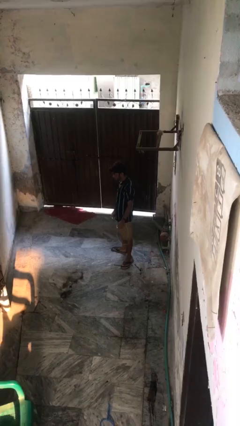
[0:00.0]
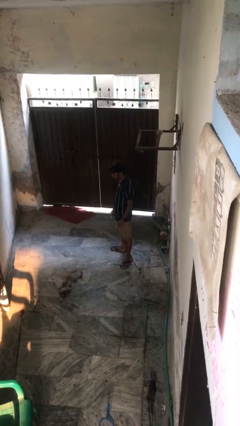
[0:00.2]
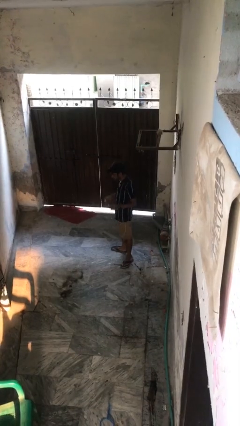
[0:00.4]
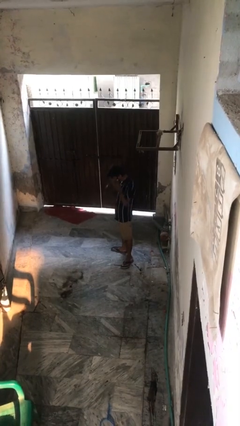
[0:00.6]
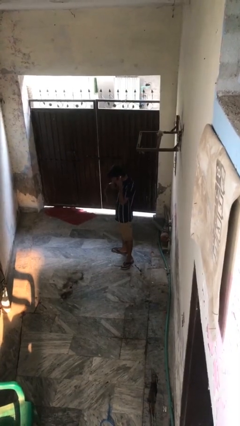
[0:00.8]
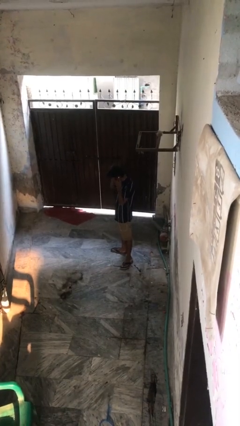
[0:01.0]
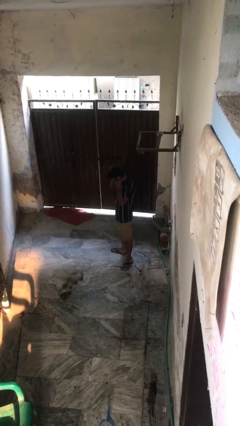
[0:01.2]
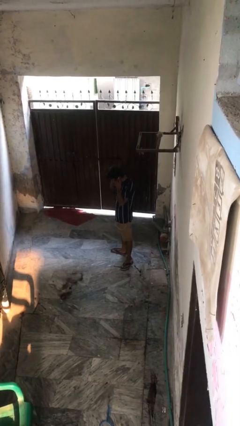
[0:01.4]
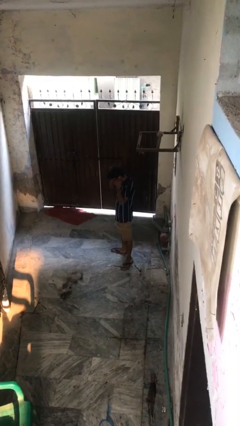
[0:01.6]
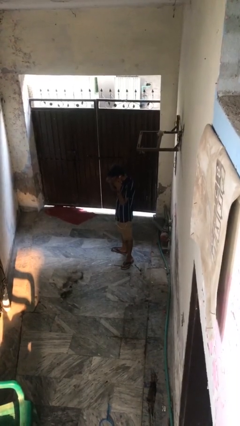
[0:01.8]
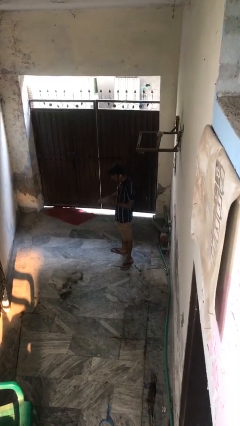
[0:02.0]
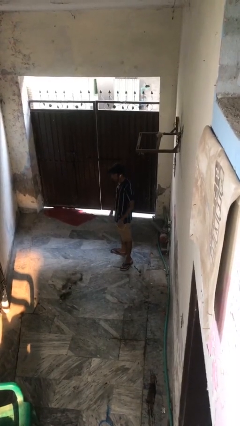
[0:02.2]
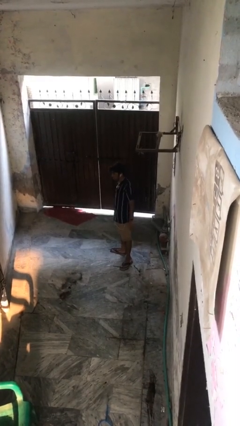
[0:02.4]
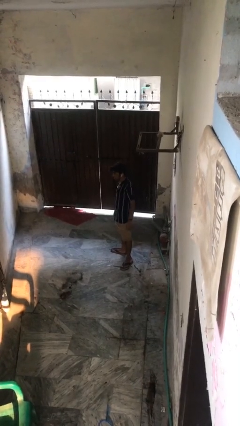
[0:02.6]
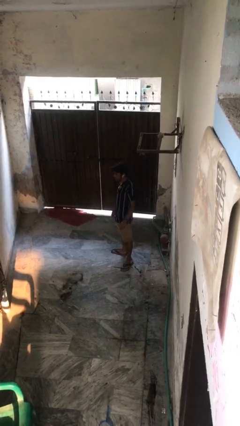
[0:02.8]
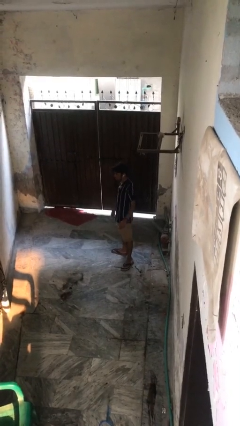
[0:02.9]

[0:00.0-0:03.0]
person puts on headphones

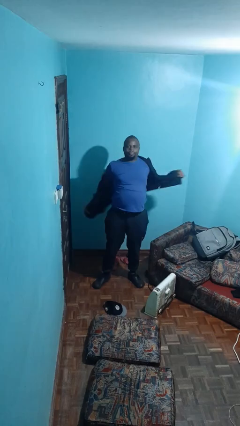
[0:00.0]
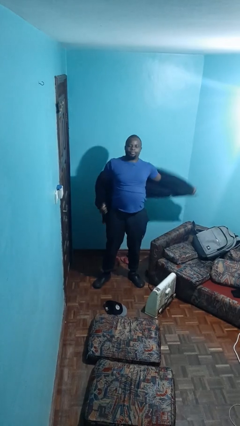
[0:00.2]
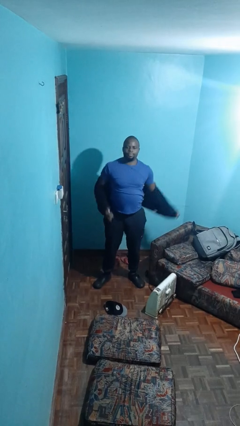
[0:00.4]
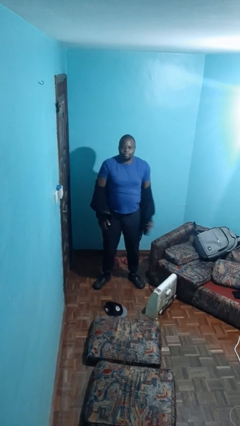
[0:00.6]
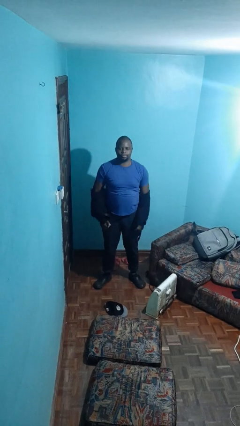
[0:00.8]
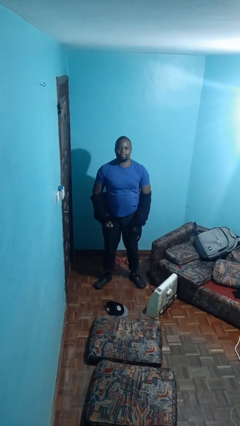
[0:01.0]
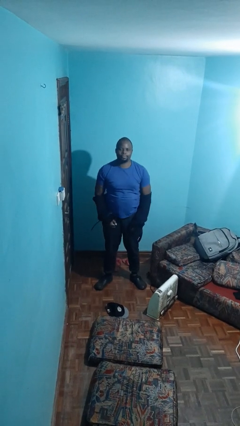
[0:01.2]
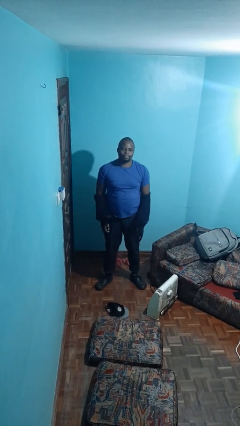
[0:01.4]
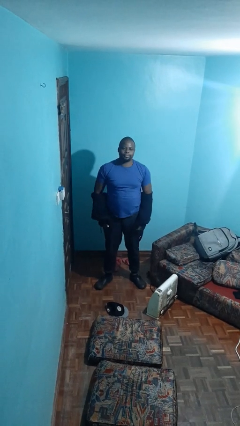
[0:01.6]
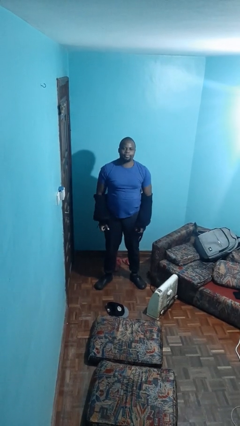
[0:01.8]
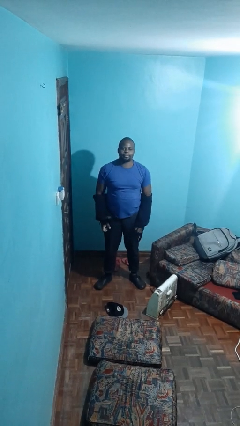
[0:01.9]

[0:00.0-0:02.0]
person takes off jacket

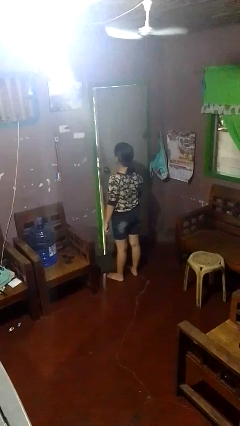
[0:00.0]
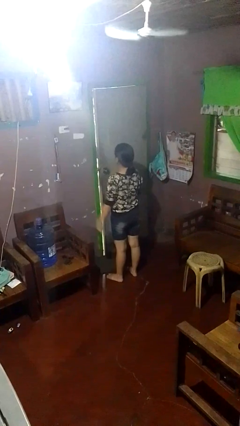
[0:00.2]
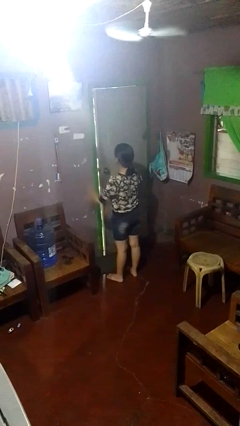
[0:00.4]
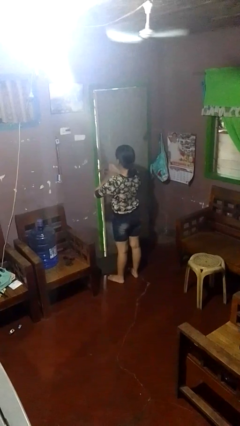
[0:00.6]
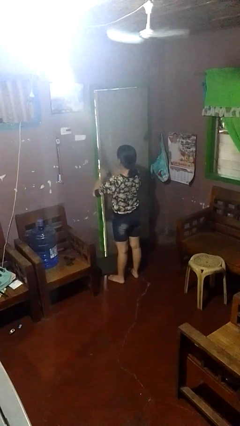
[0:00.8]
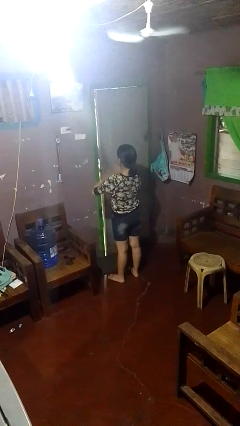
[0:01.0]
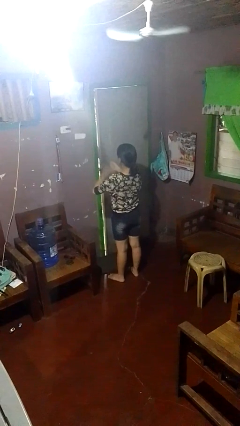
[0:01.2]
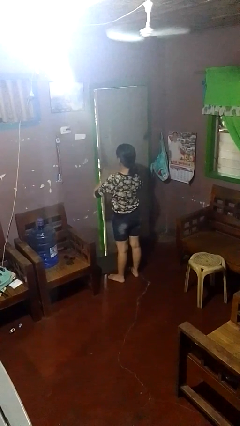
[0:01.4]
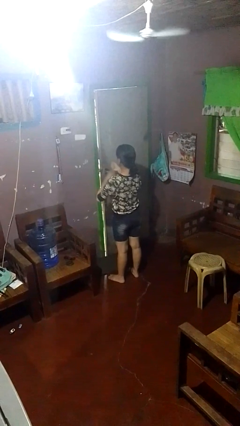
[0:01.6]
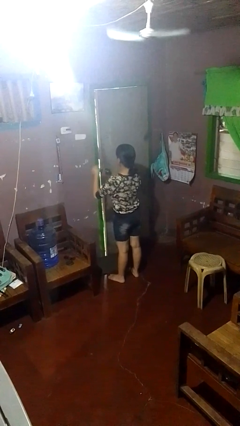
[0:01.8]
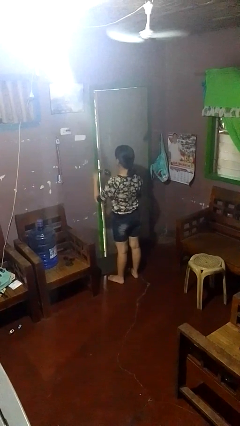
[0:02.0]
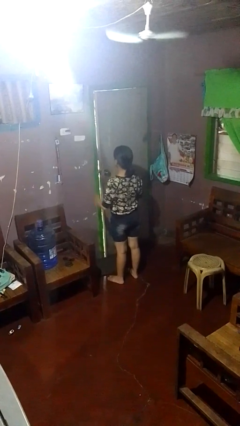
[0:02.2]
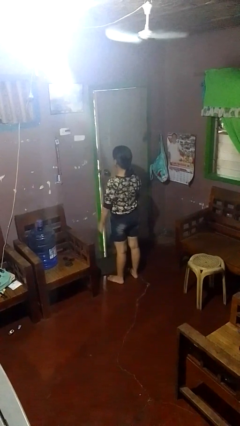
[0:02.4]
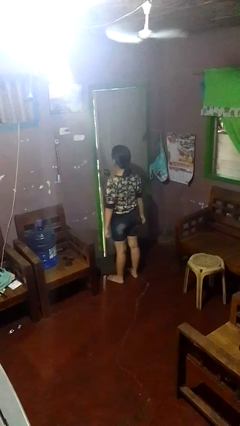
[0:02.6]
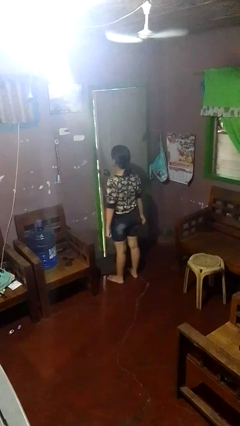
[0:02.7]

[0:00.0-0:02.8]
person drums on chest

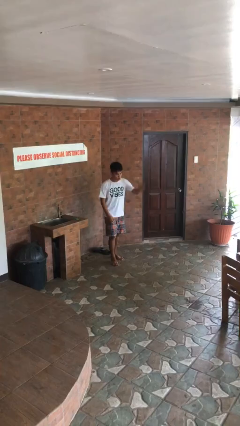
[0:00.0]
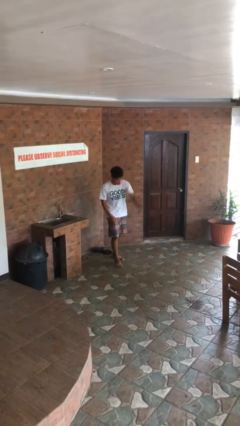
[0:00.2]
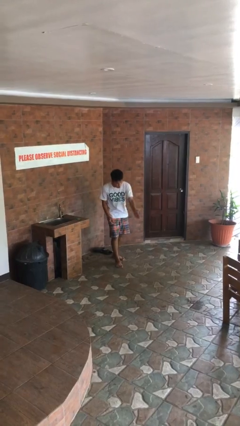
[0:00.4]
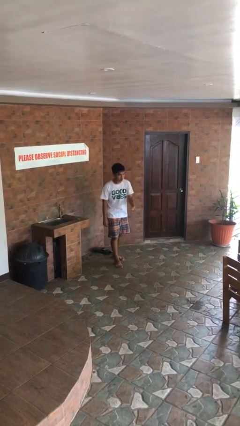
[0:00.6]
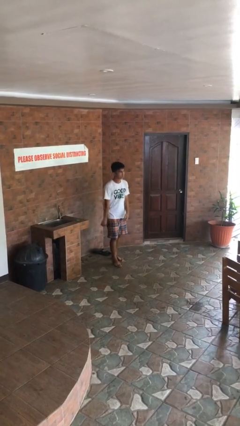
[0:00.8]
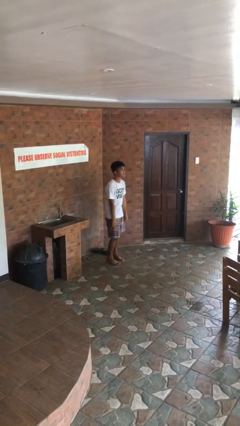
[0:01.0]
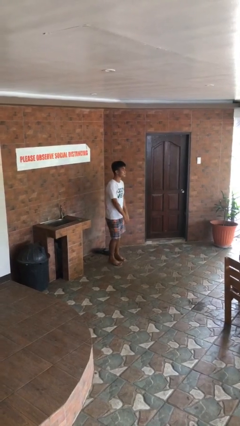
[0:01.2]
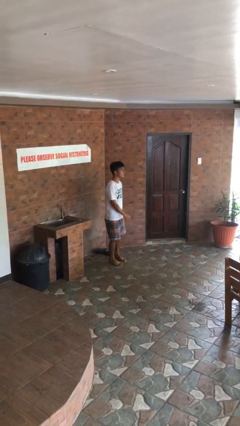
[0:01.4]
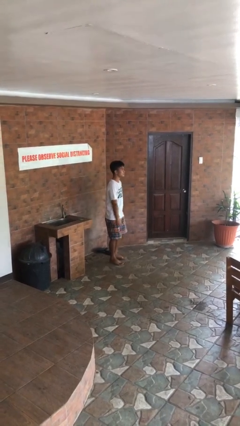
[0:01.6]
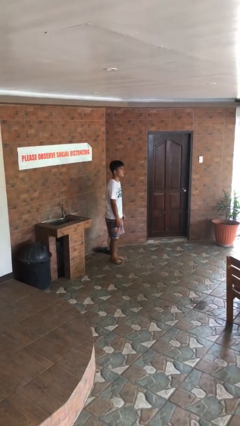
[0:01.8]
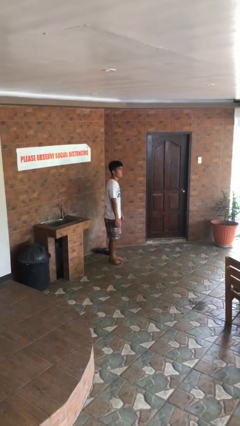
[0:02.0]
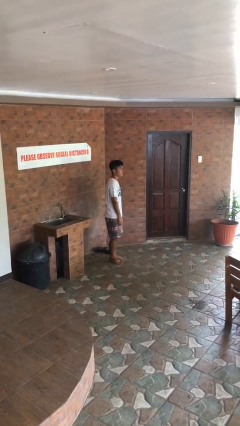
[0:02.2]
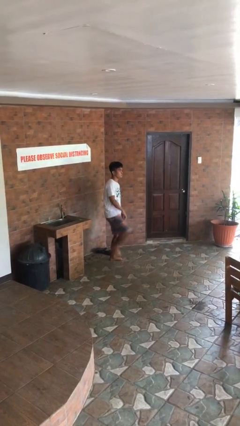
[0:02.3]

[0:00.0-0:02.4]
person karate chop

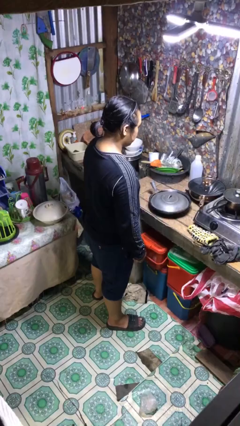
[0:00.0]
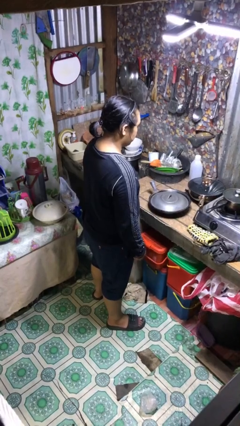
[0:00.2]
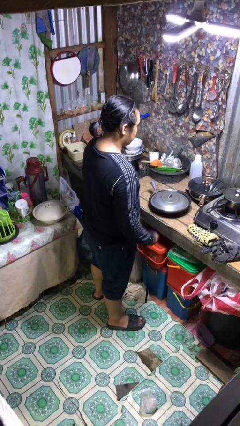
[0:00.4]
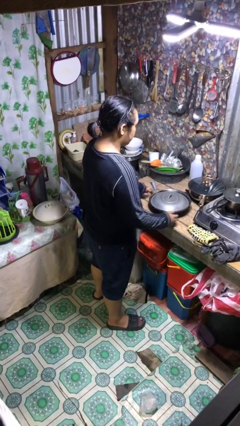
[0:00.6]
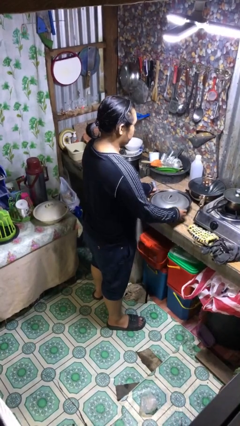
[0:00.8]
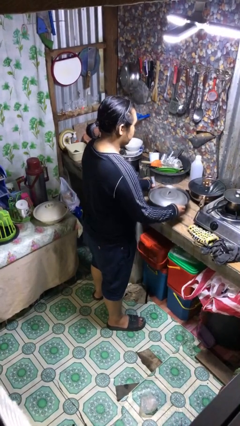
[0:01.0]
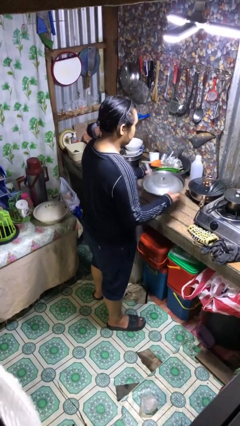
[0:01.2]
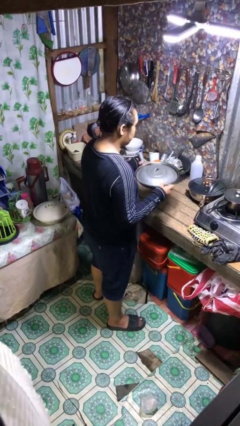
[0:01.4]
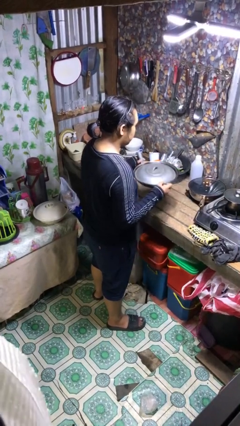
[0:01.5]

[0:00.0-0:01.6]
person picks up object from countertop

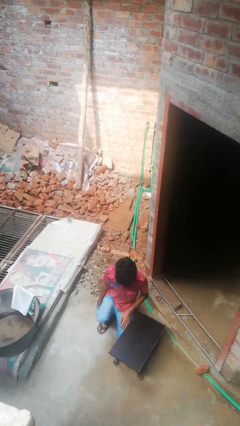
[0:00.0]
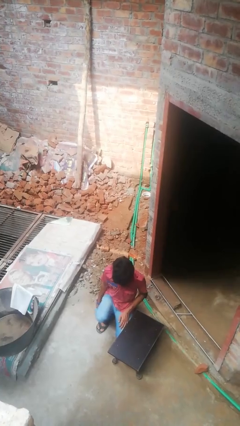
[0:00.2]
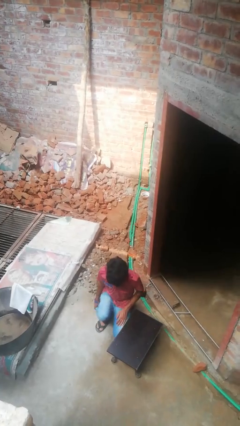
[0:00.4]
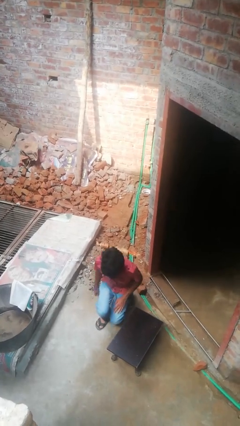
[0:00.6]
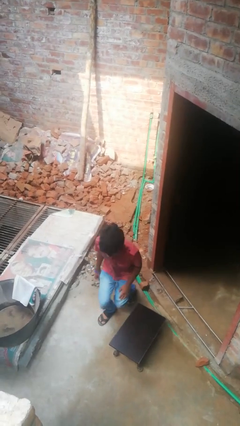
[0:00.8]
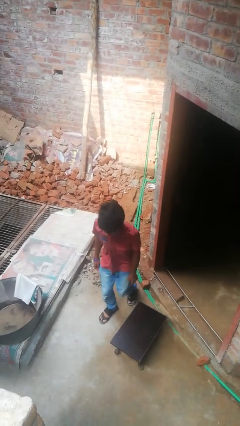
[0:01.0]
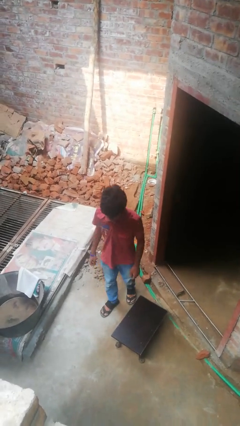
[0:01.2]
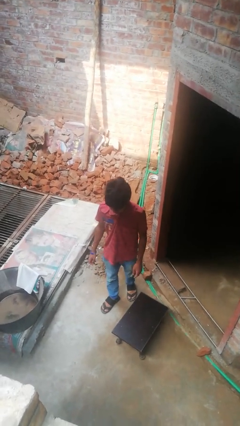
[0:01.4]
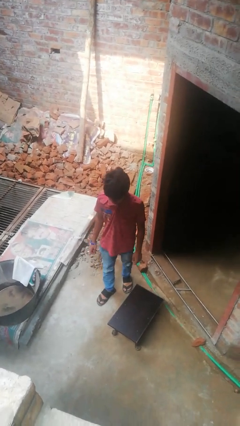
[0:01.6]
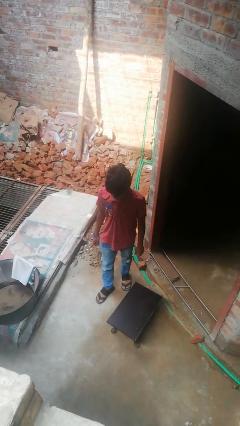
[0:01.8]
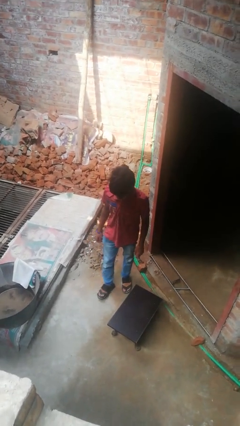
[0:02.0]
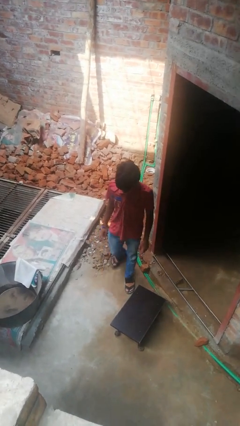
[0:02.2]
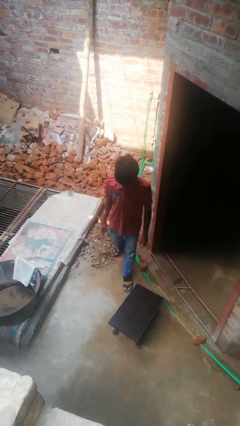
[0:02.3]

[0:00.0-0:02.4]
person stands up from floor

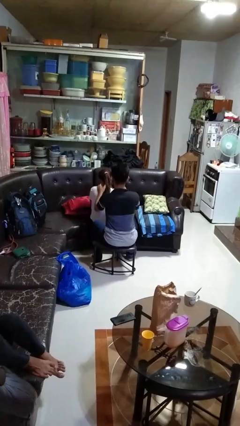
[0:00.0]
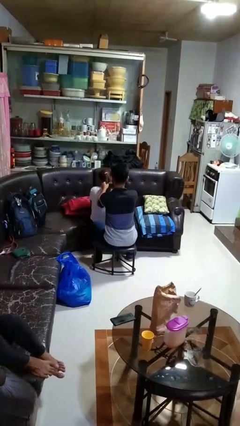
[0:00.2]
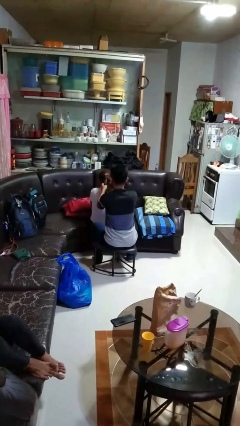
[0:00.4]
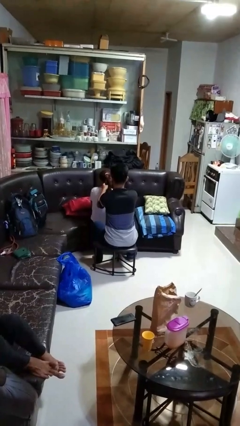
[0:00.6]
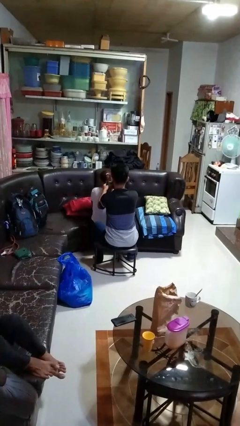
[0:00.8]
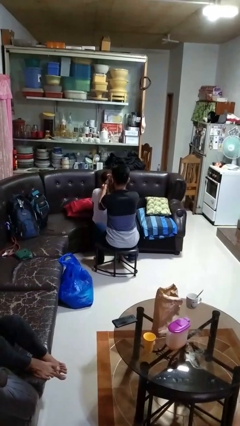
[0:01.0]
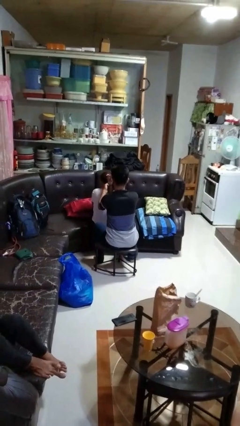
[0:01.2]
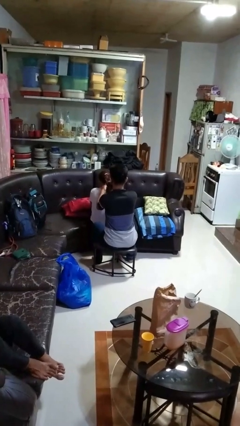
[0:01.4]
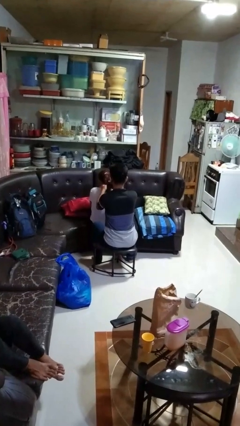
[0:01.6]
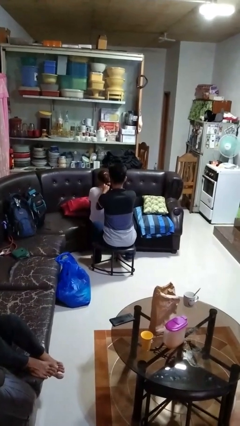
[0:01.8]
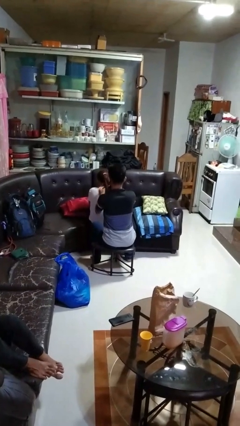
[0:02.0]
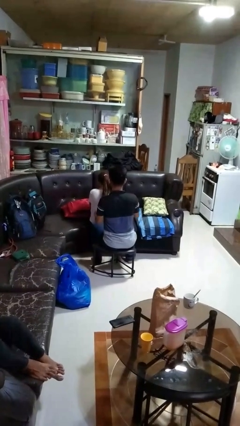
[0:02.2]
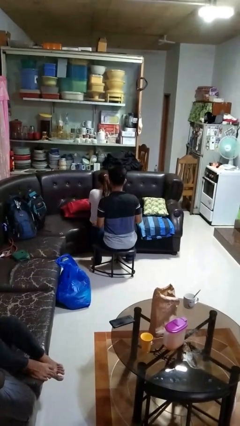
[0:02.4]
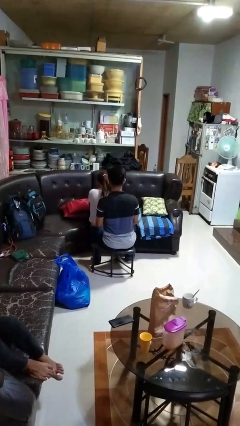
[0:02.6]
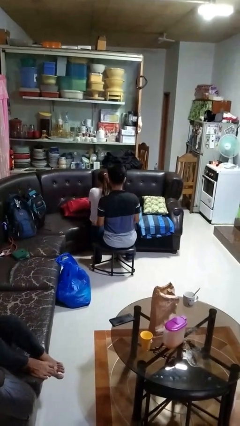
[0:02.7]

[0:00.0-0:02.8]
person braids hair of person
